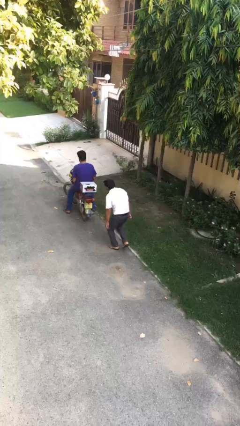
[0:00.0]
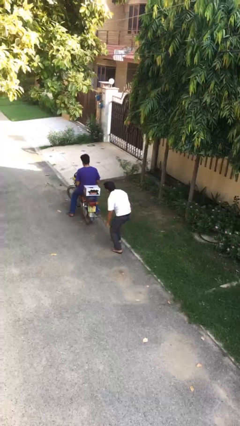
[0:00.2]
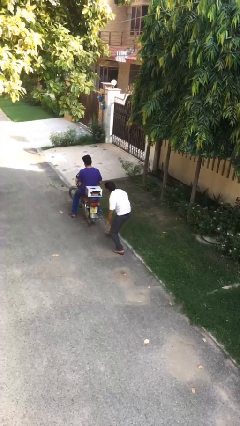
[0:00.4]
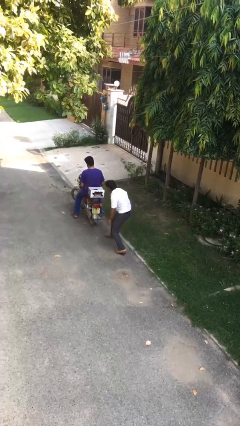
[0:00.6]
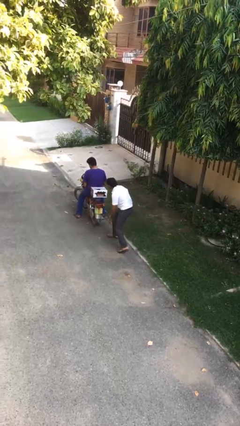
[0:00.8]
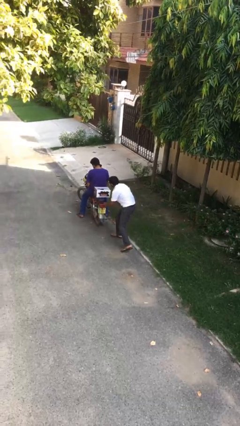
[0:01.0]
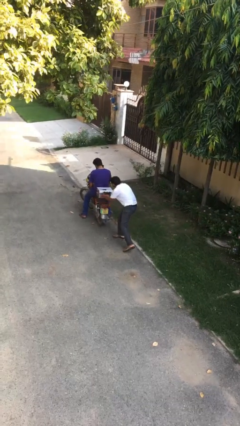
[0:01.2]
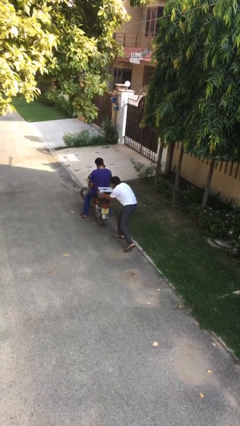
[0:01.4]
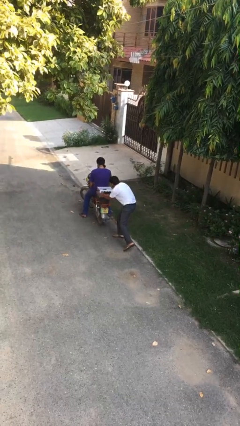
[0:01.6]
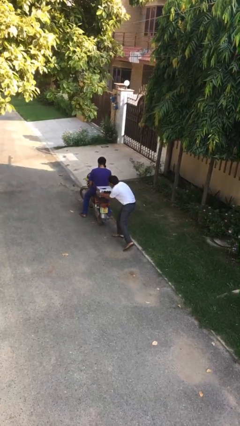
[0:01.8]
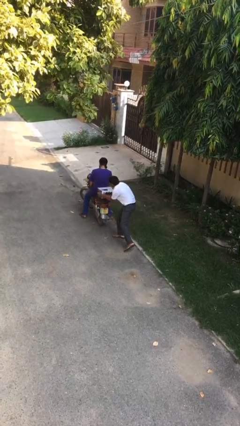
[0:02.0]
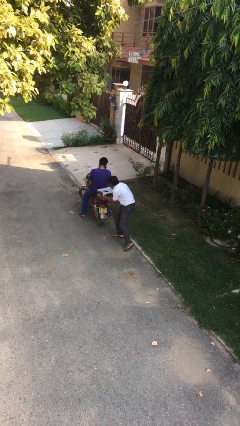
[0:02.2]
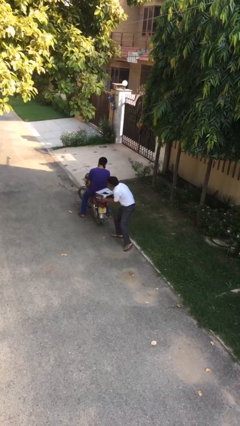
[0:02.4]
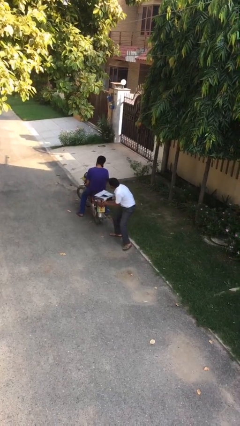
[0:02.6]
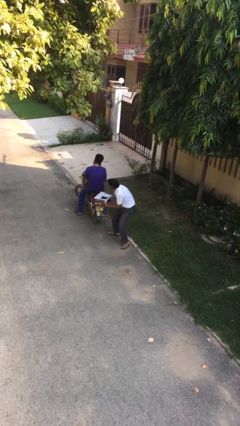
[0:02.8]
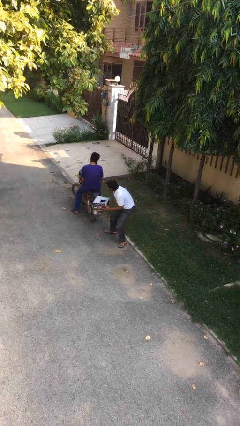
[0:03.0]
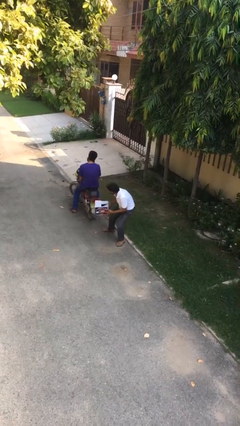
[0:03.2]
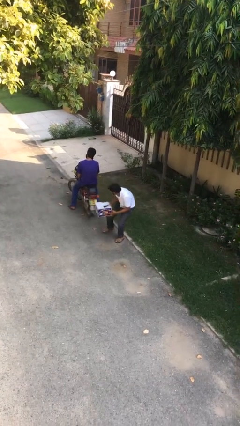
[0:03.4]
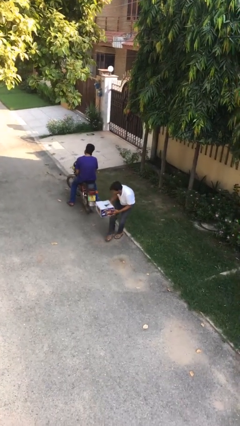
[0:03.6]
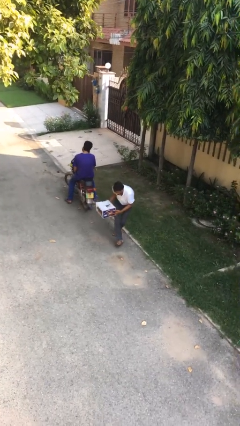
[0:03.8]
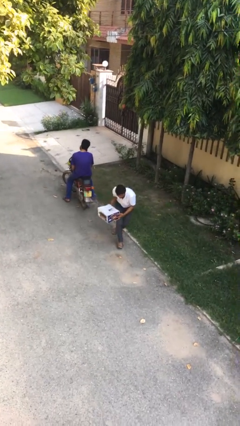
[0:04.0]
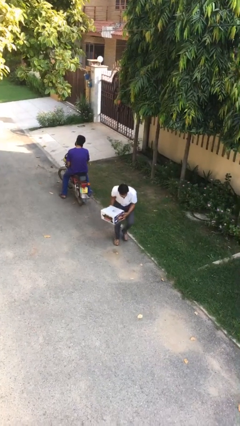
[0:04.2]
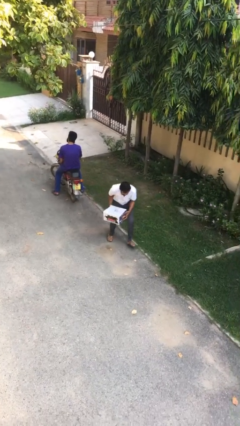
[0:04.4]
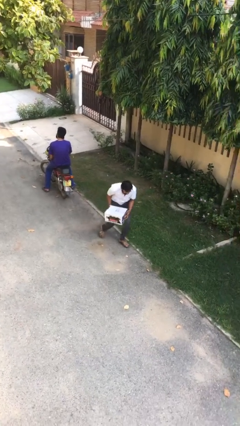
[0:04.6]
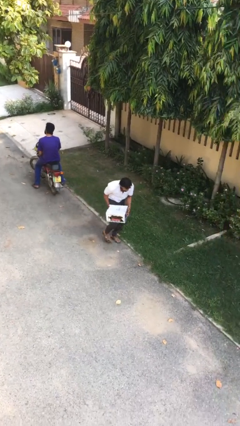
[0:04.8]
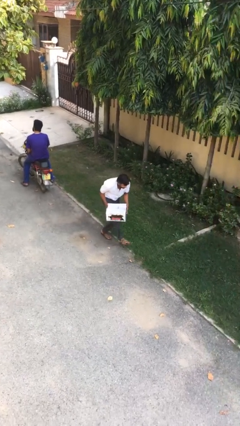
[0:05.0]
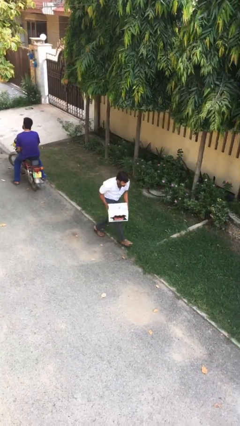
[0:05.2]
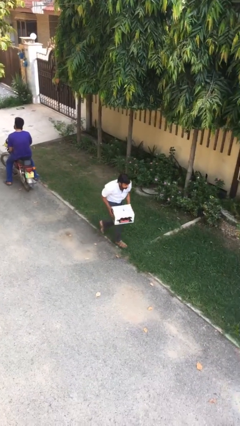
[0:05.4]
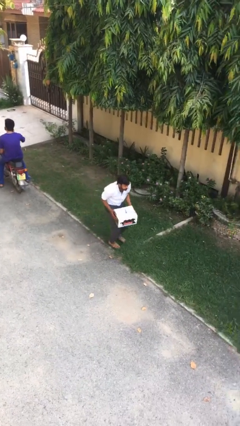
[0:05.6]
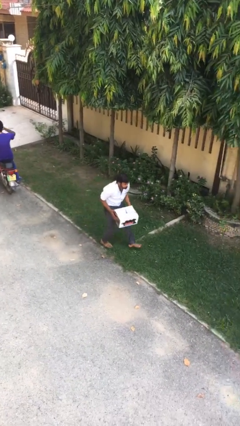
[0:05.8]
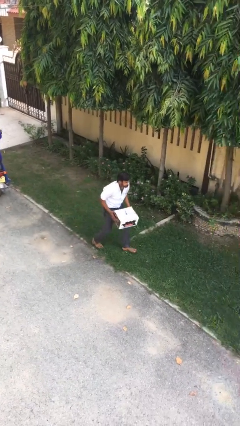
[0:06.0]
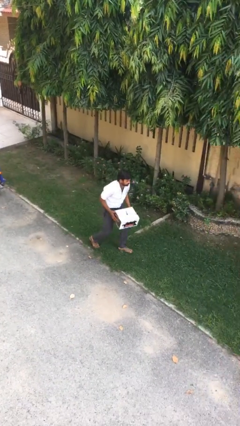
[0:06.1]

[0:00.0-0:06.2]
person steals object from person

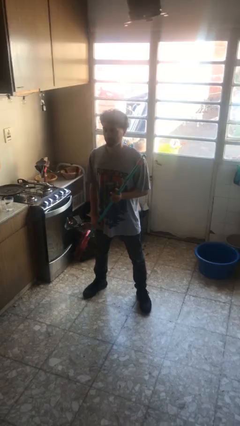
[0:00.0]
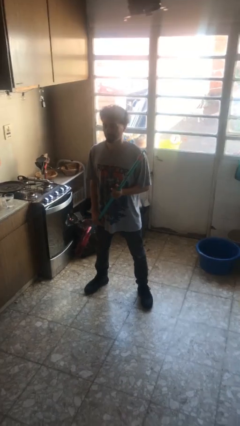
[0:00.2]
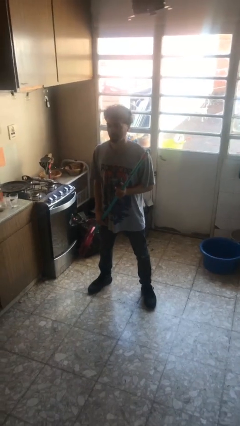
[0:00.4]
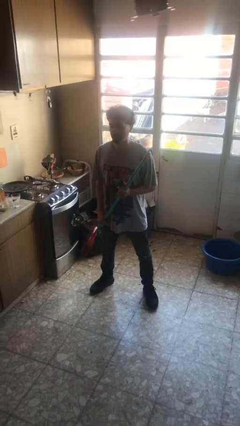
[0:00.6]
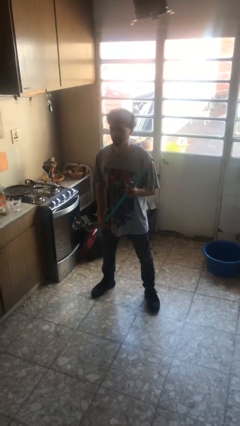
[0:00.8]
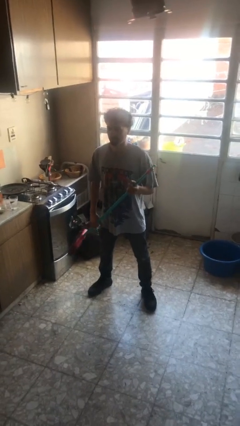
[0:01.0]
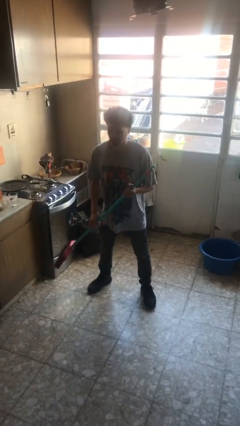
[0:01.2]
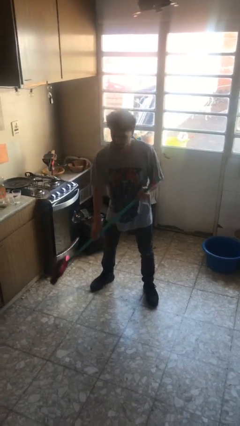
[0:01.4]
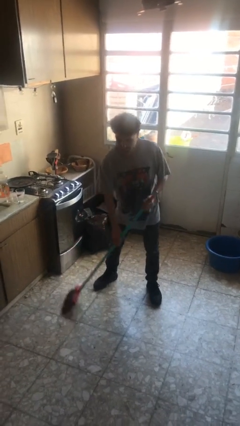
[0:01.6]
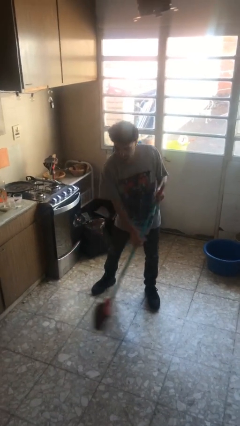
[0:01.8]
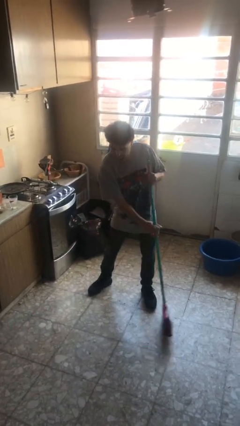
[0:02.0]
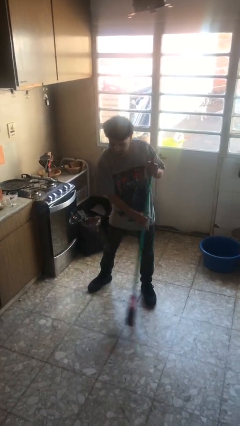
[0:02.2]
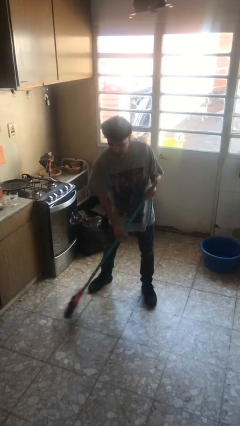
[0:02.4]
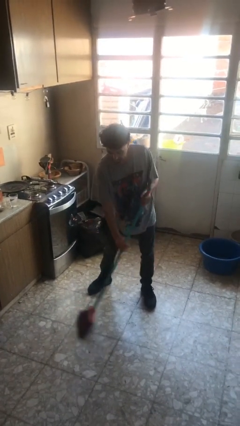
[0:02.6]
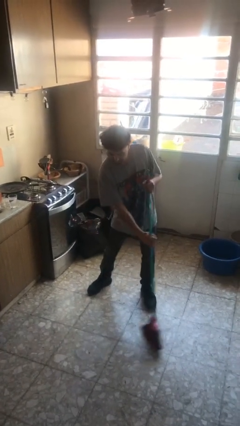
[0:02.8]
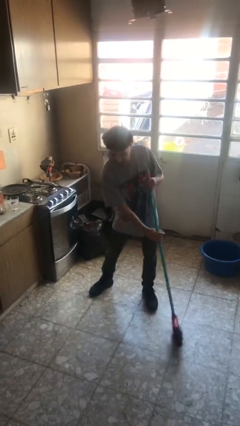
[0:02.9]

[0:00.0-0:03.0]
person sweeps floor

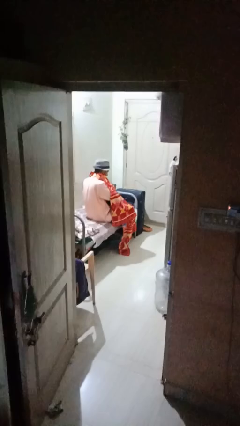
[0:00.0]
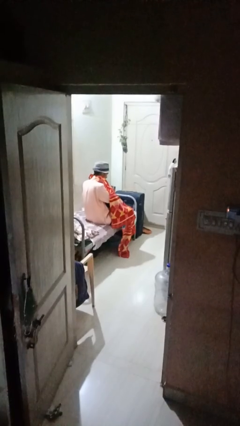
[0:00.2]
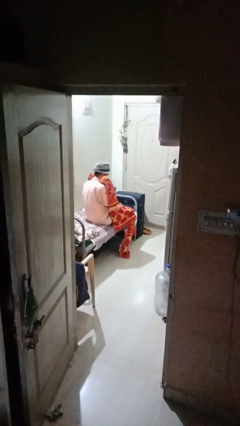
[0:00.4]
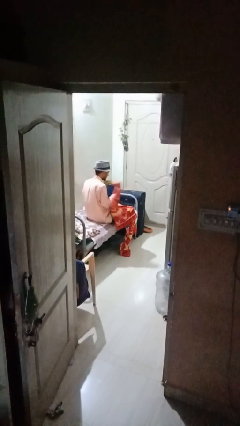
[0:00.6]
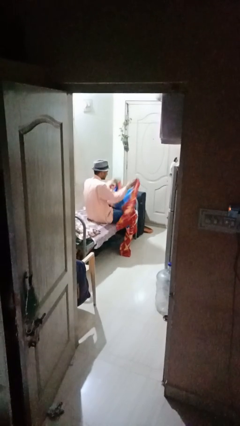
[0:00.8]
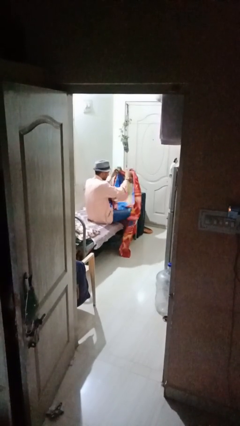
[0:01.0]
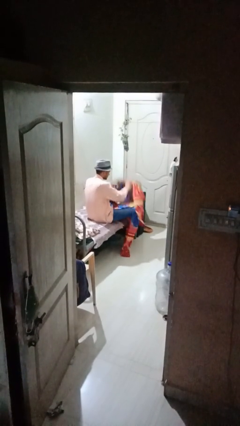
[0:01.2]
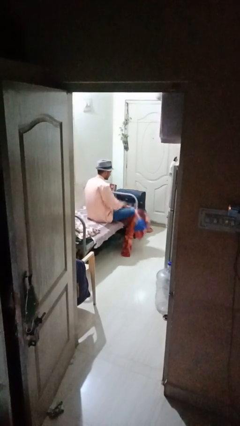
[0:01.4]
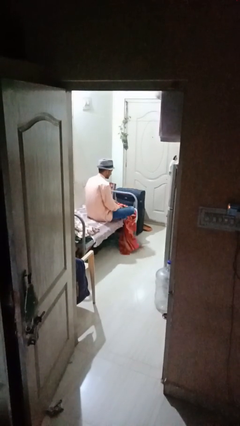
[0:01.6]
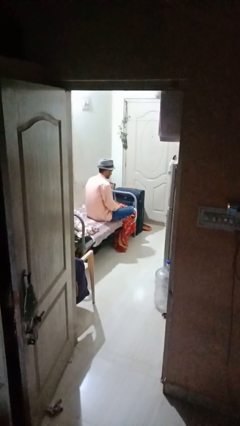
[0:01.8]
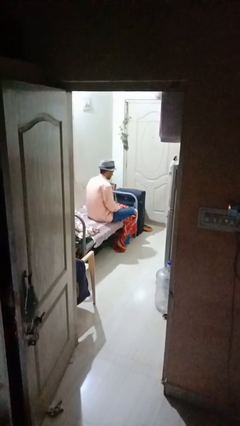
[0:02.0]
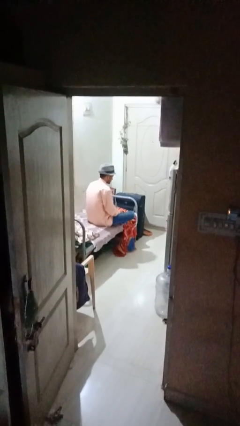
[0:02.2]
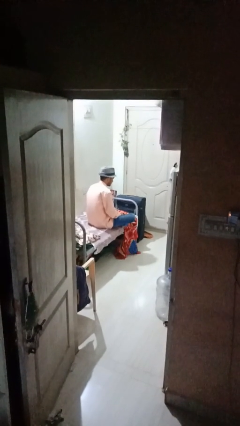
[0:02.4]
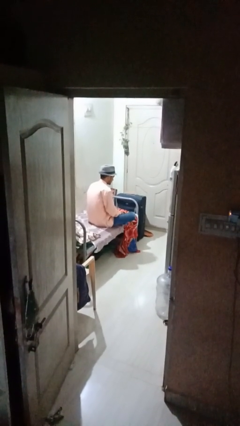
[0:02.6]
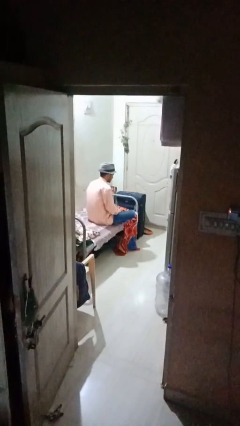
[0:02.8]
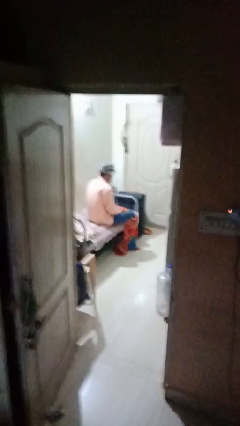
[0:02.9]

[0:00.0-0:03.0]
person uncovers with blanket

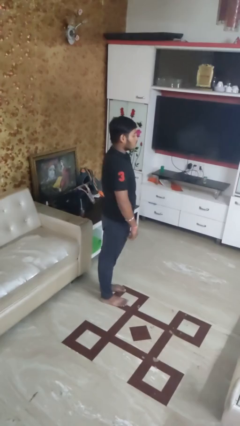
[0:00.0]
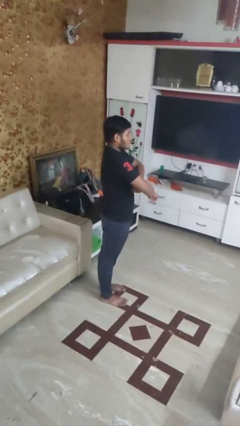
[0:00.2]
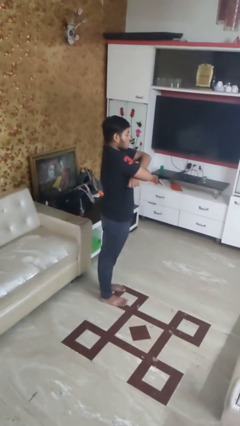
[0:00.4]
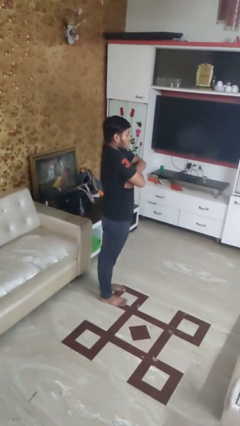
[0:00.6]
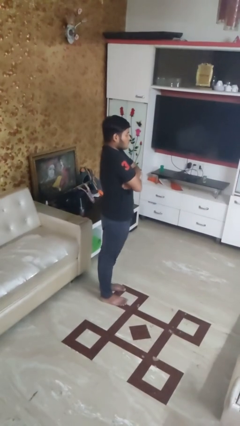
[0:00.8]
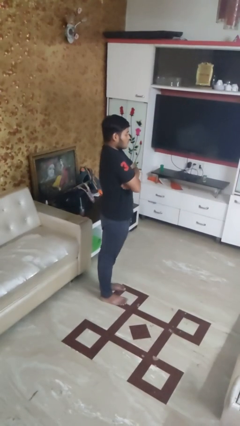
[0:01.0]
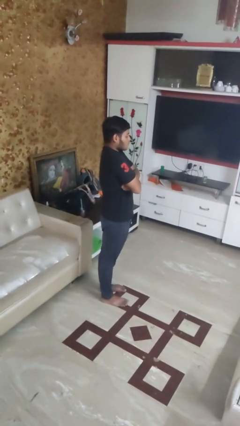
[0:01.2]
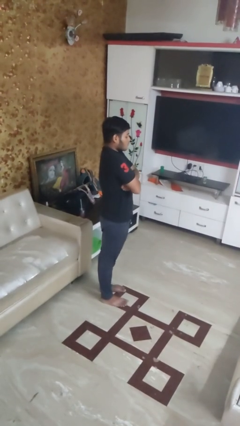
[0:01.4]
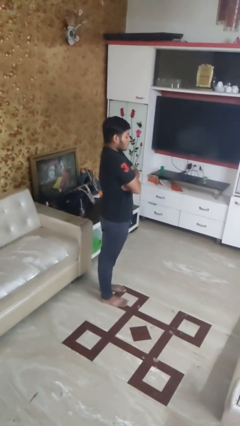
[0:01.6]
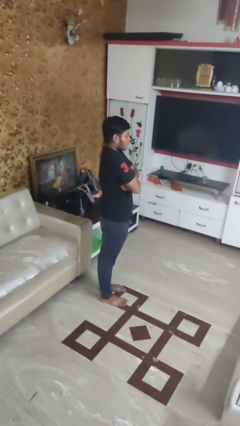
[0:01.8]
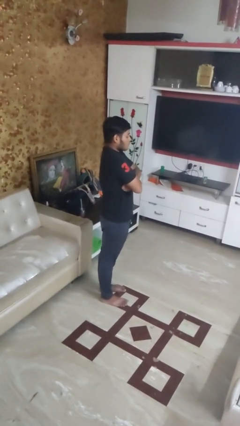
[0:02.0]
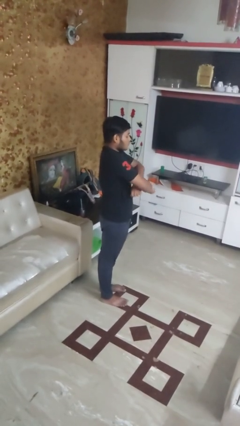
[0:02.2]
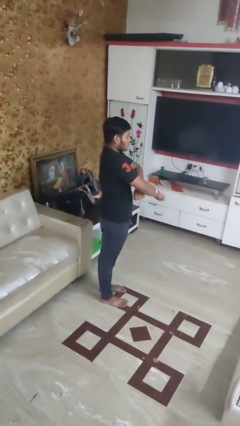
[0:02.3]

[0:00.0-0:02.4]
person crosses arms

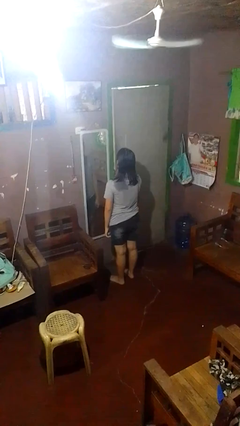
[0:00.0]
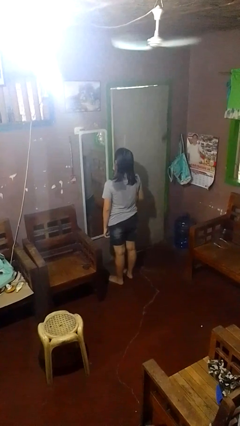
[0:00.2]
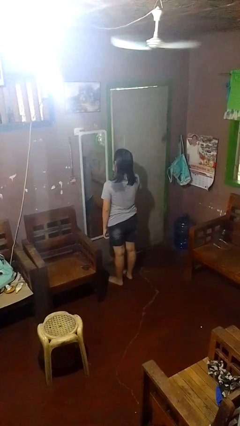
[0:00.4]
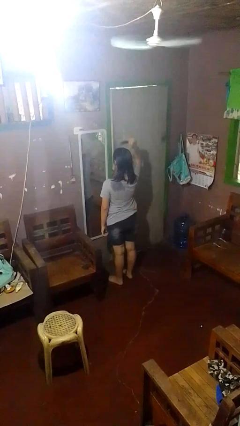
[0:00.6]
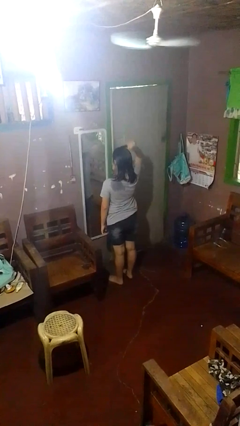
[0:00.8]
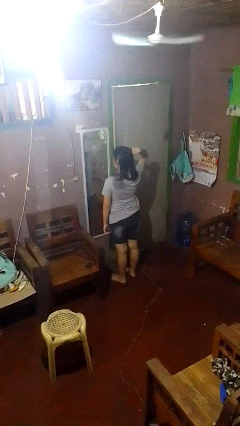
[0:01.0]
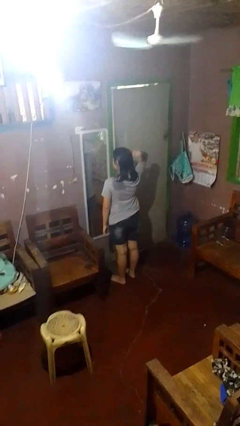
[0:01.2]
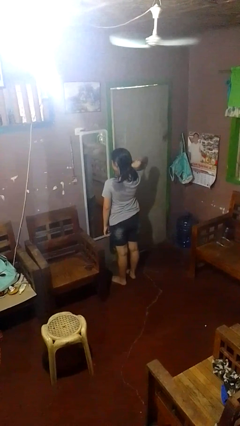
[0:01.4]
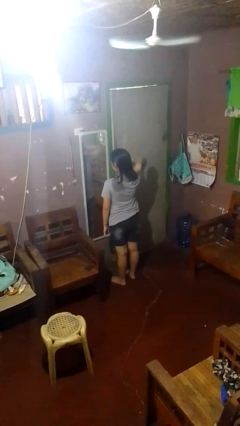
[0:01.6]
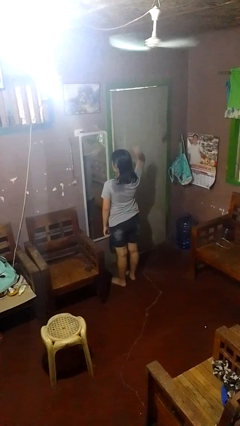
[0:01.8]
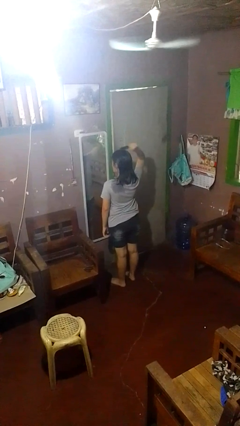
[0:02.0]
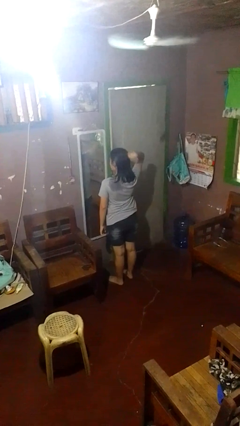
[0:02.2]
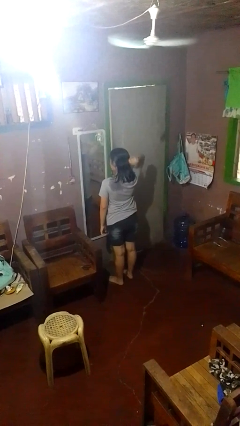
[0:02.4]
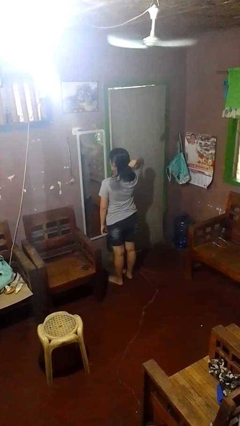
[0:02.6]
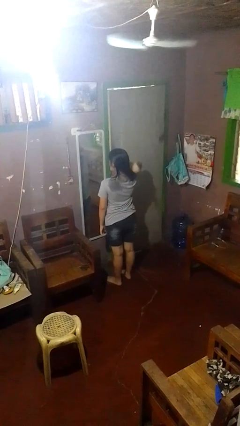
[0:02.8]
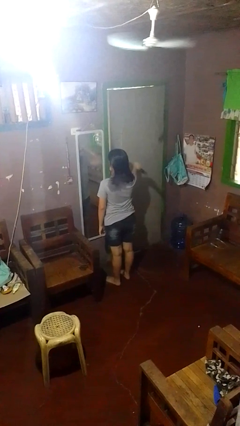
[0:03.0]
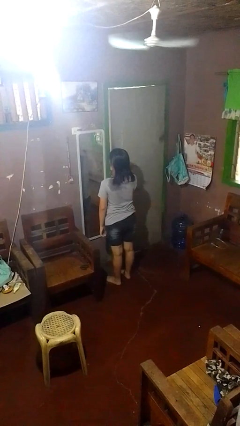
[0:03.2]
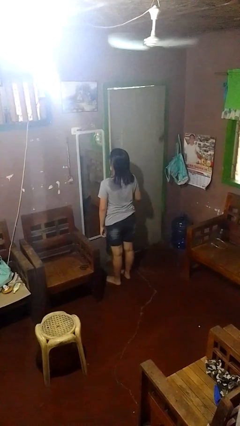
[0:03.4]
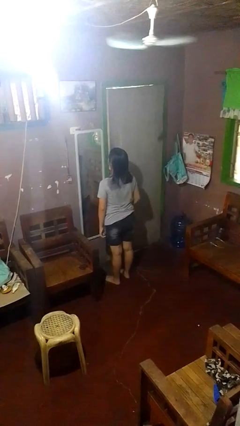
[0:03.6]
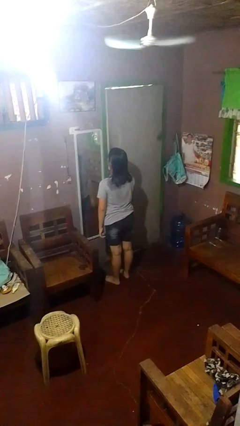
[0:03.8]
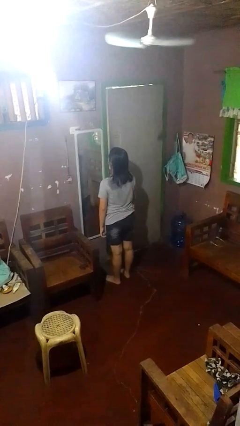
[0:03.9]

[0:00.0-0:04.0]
person brushes hair
